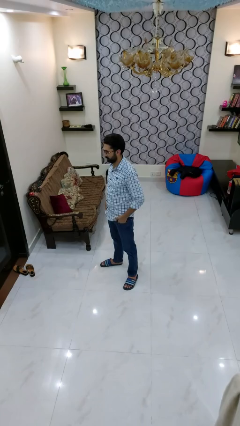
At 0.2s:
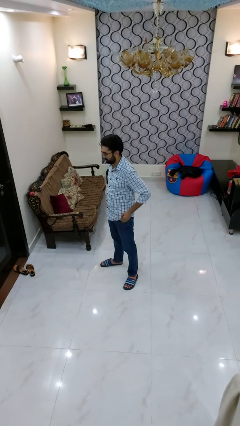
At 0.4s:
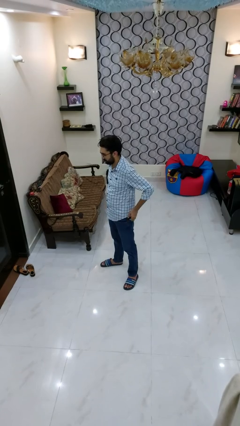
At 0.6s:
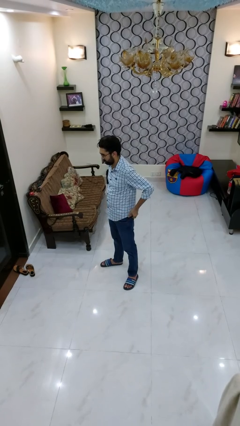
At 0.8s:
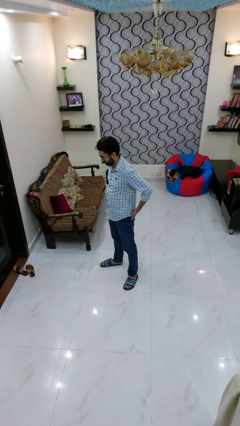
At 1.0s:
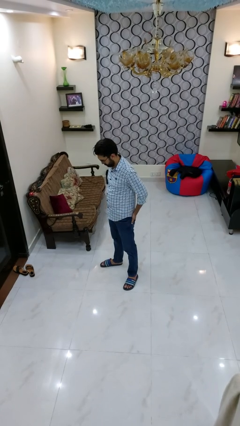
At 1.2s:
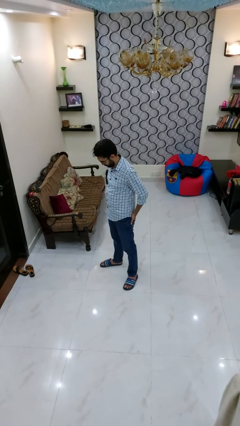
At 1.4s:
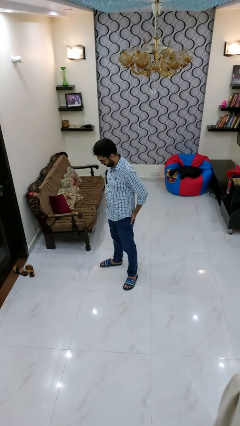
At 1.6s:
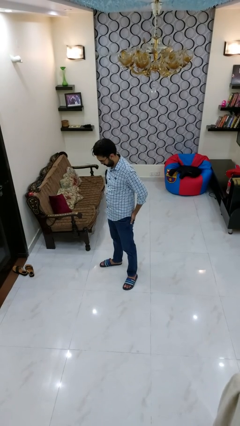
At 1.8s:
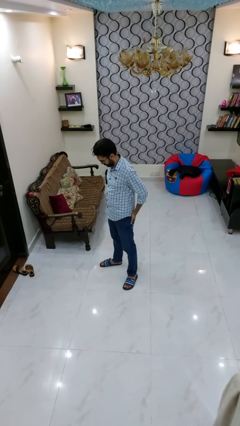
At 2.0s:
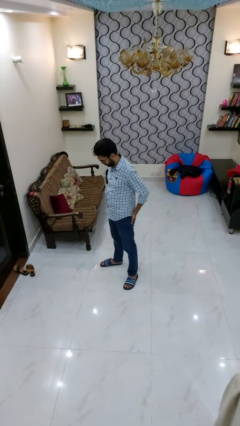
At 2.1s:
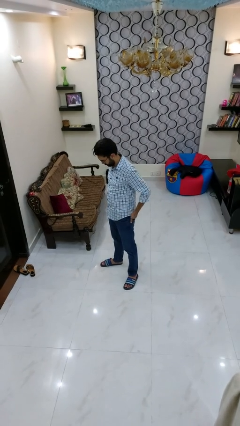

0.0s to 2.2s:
person puts hands in back pockets

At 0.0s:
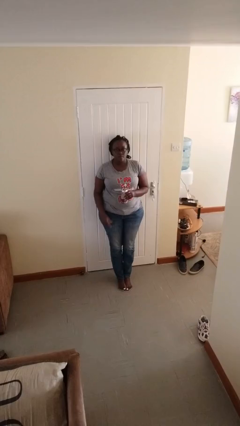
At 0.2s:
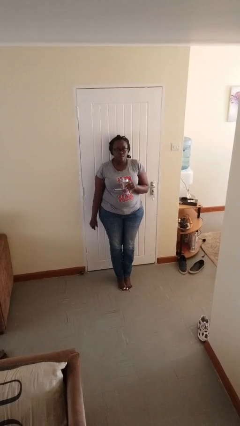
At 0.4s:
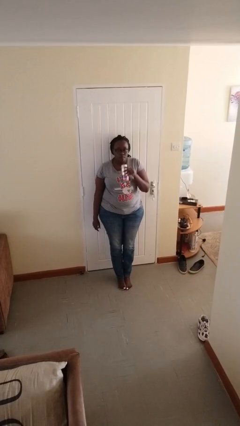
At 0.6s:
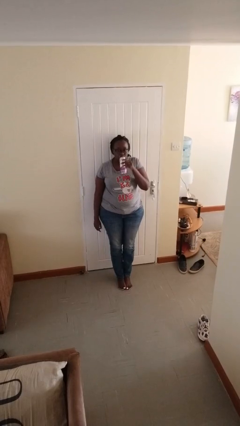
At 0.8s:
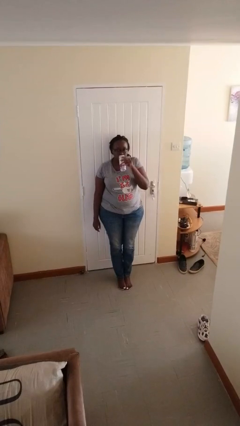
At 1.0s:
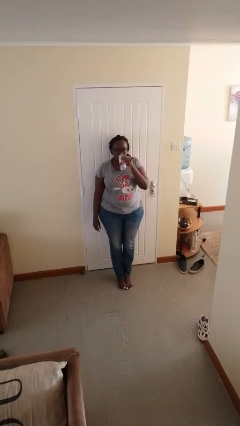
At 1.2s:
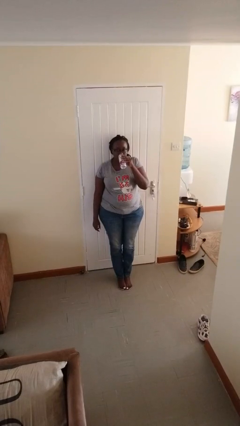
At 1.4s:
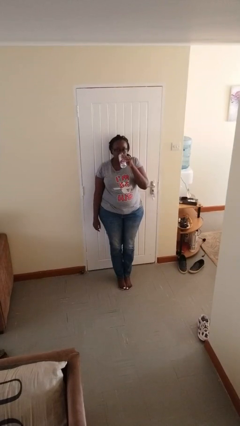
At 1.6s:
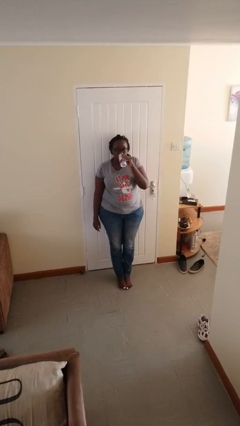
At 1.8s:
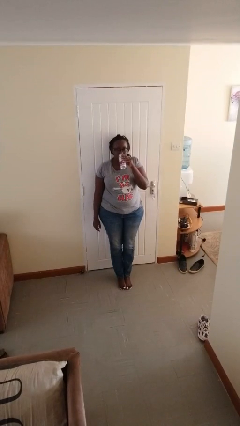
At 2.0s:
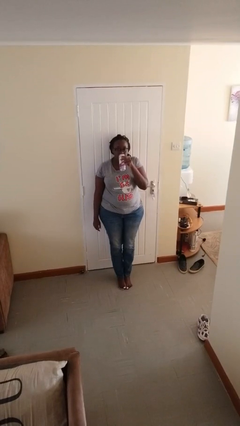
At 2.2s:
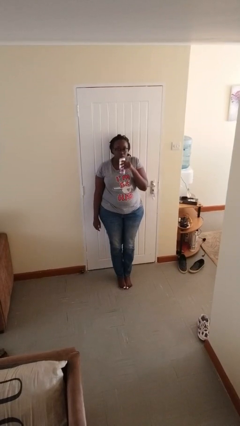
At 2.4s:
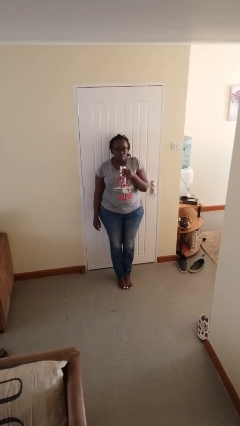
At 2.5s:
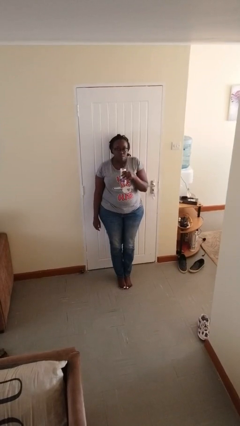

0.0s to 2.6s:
person drinks from beverage can

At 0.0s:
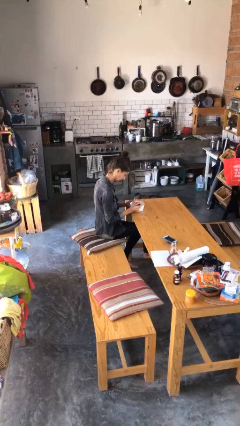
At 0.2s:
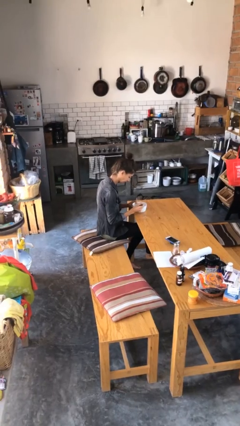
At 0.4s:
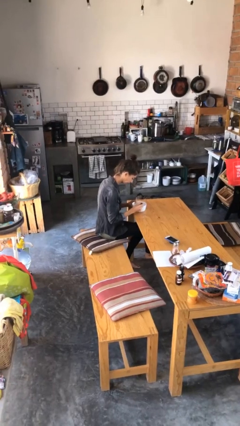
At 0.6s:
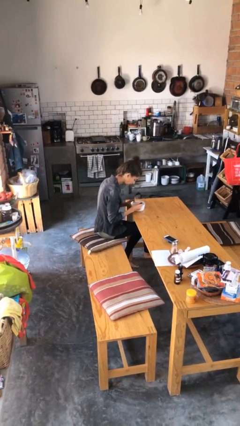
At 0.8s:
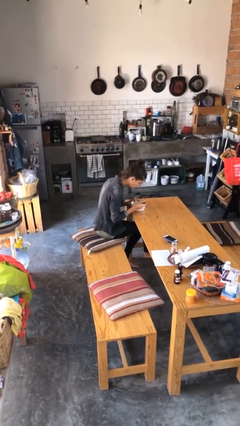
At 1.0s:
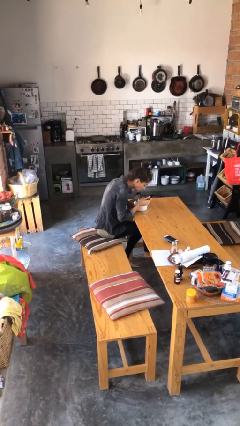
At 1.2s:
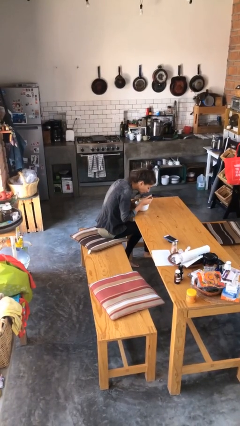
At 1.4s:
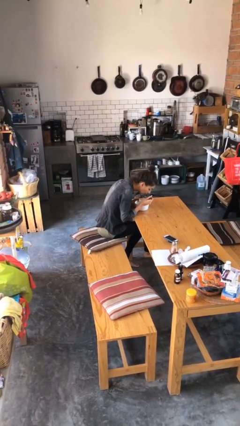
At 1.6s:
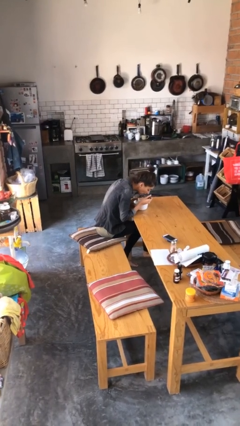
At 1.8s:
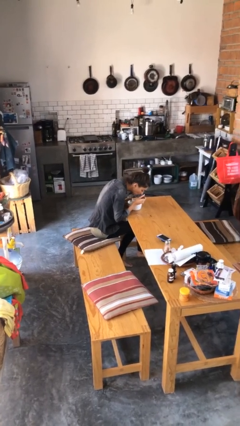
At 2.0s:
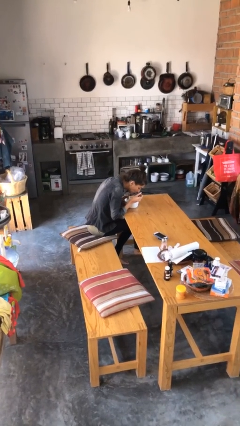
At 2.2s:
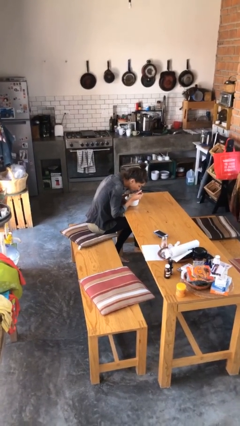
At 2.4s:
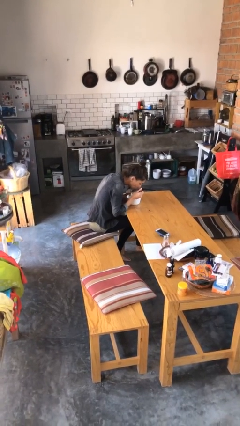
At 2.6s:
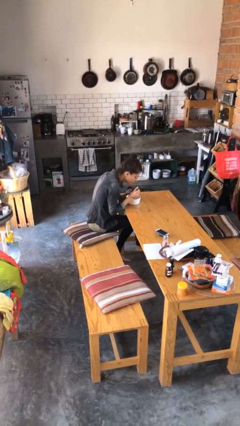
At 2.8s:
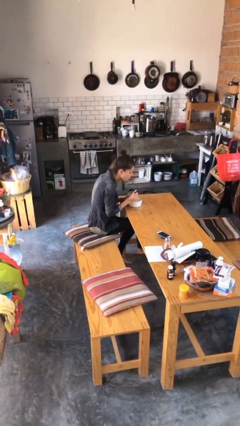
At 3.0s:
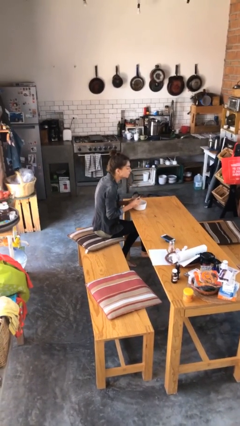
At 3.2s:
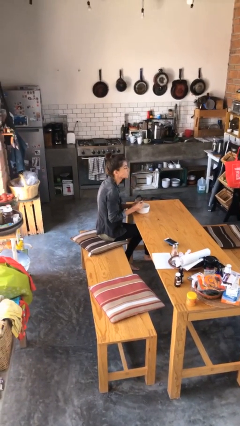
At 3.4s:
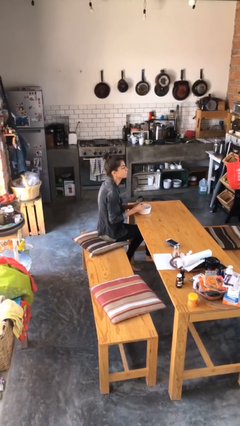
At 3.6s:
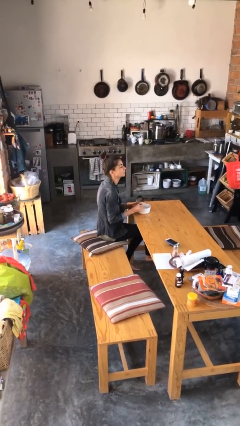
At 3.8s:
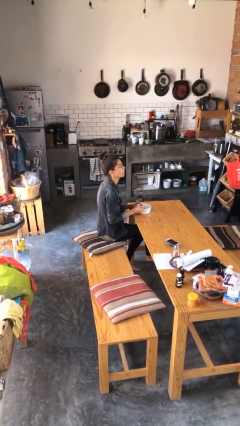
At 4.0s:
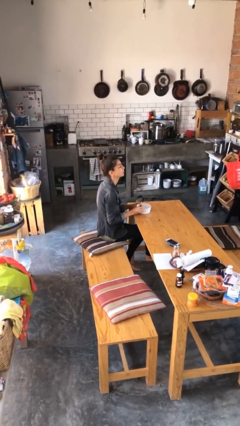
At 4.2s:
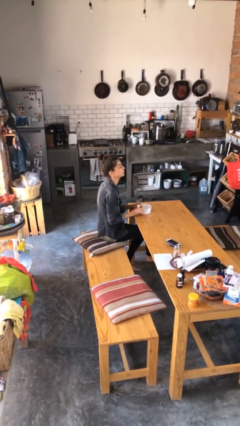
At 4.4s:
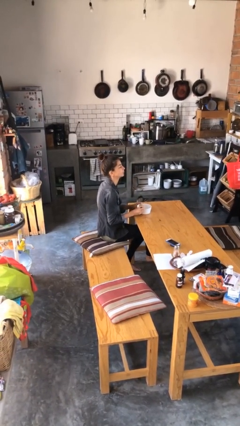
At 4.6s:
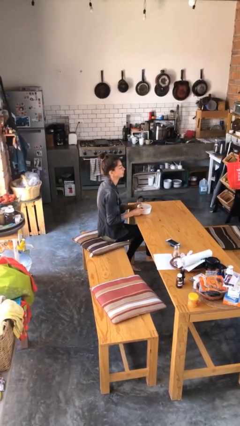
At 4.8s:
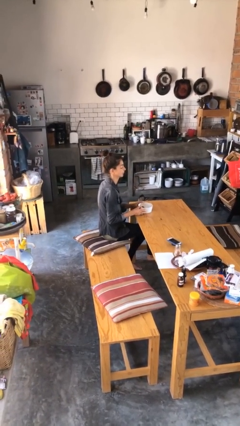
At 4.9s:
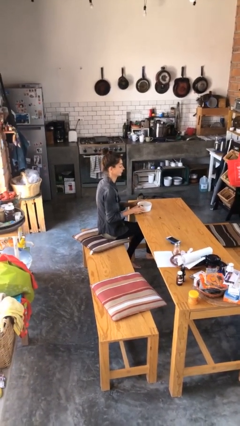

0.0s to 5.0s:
person eats with utensil

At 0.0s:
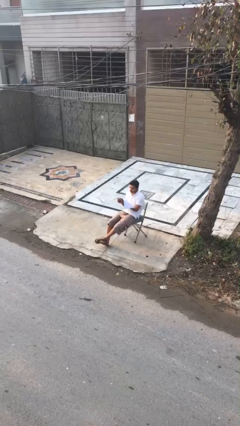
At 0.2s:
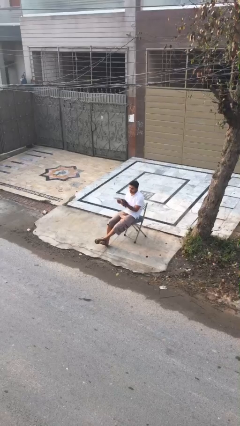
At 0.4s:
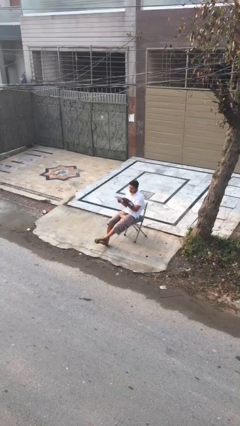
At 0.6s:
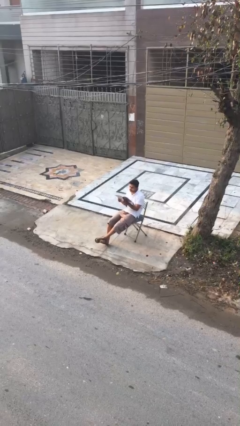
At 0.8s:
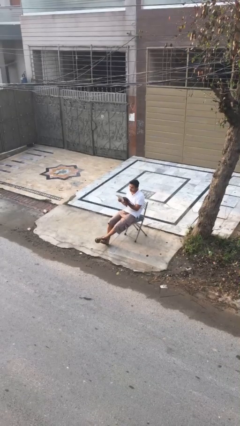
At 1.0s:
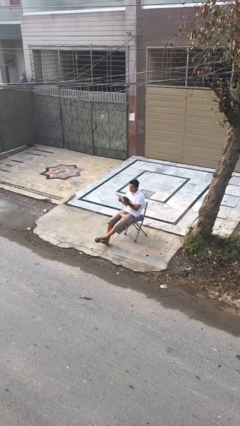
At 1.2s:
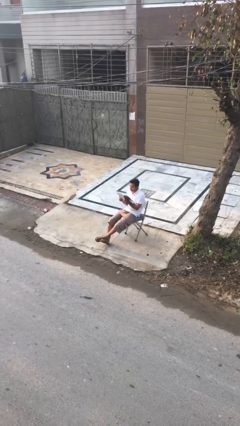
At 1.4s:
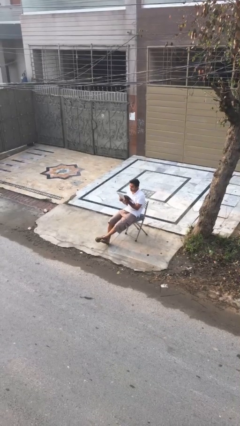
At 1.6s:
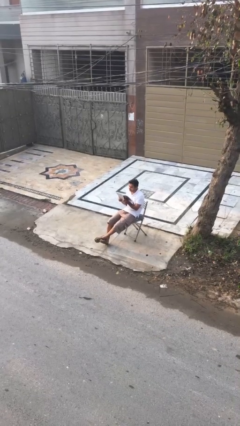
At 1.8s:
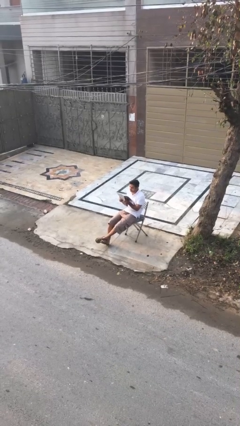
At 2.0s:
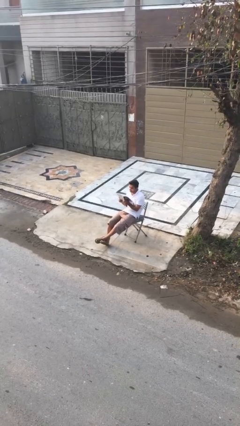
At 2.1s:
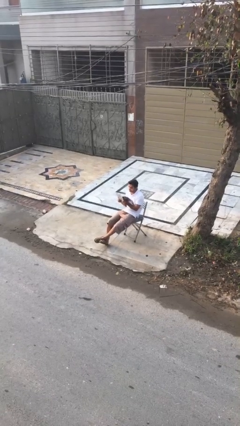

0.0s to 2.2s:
person reads document

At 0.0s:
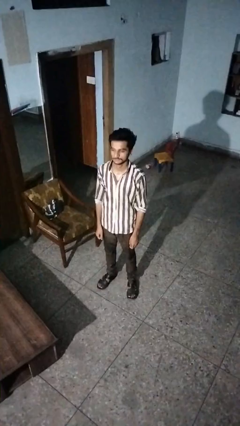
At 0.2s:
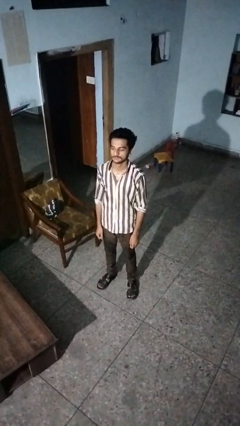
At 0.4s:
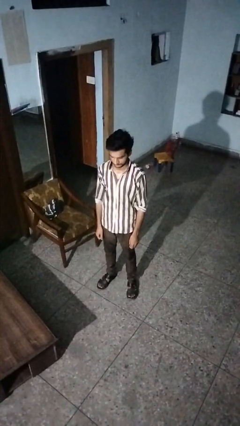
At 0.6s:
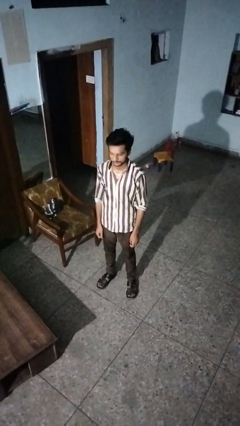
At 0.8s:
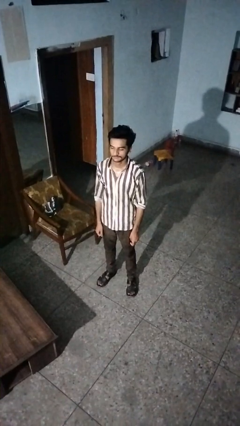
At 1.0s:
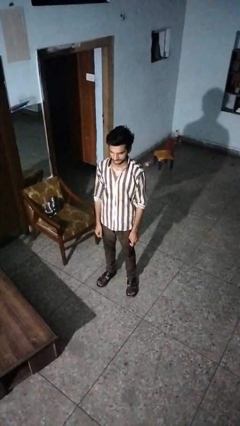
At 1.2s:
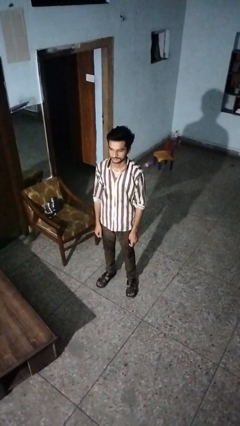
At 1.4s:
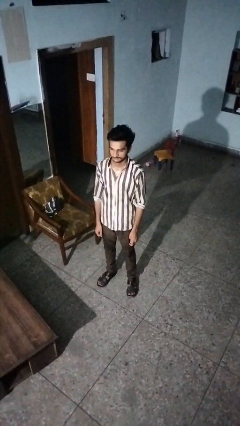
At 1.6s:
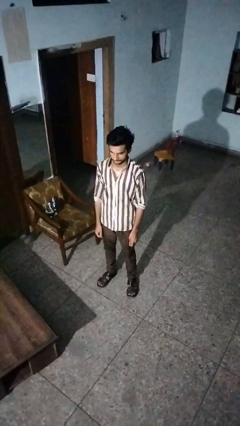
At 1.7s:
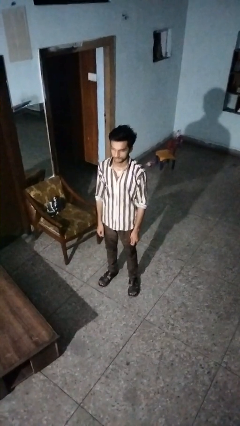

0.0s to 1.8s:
person nods head

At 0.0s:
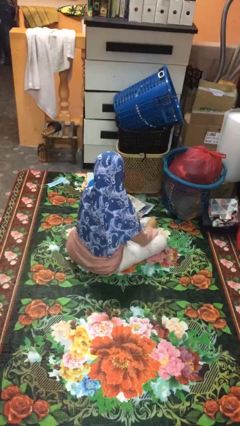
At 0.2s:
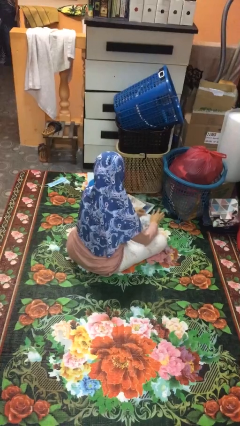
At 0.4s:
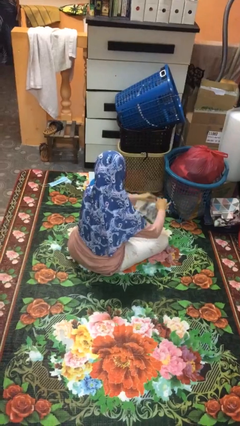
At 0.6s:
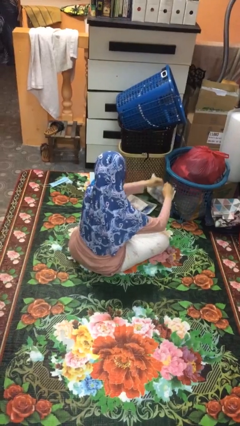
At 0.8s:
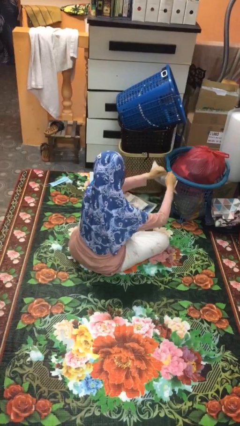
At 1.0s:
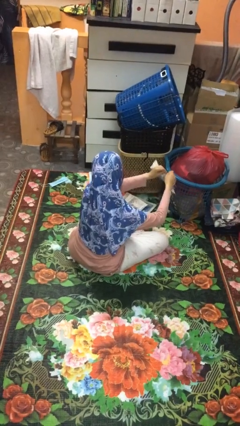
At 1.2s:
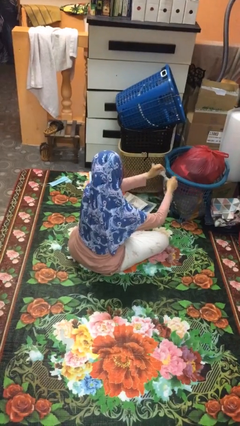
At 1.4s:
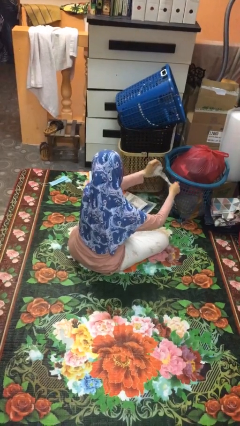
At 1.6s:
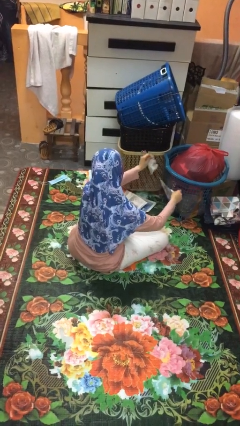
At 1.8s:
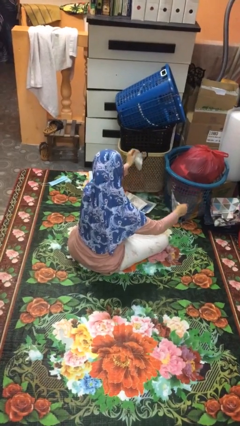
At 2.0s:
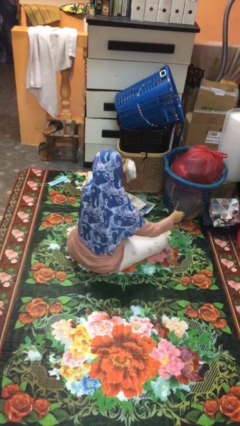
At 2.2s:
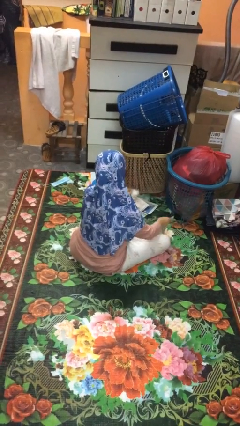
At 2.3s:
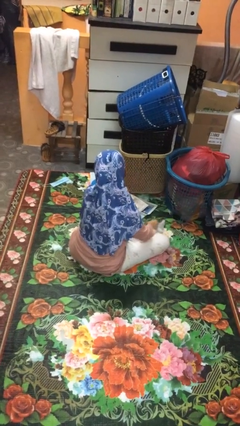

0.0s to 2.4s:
person tears paper

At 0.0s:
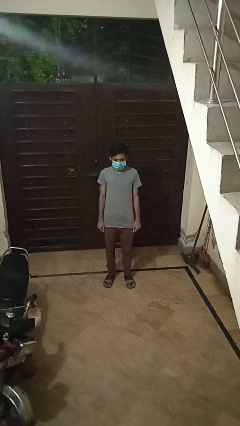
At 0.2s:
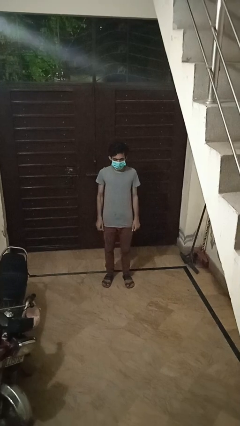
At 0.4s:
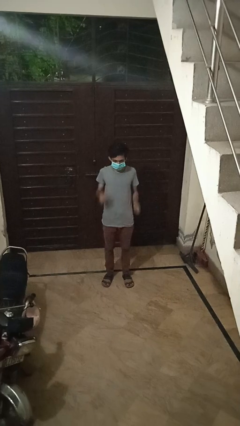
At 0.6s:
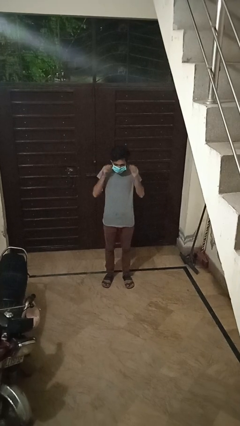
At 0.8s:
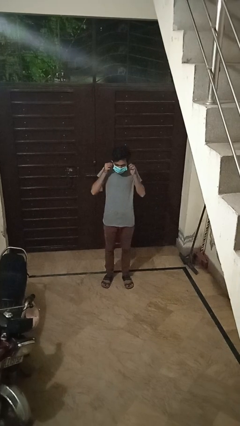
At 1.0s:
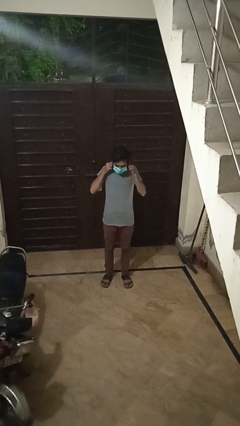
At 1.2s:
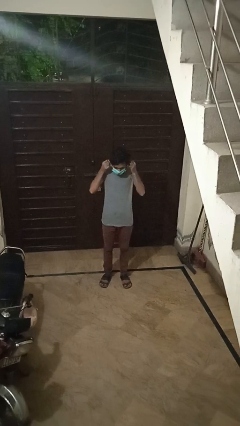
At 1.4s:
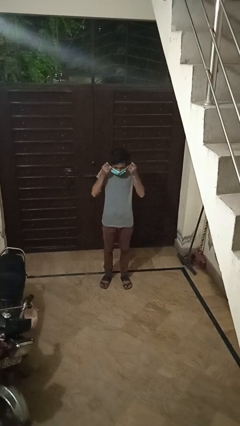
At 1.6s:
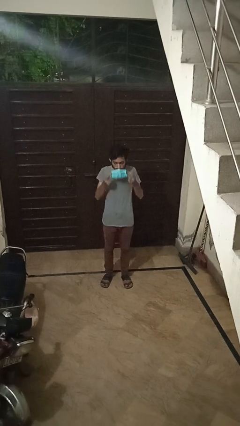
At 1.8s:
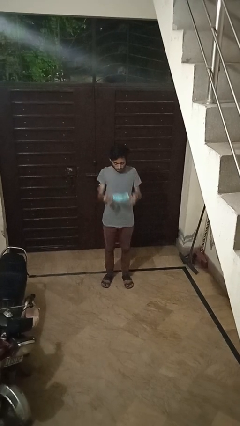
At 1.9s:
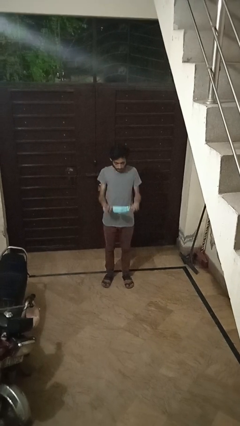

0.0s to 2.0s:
person takes off facemask
